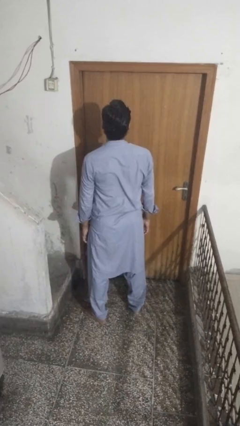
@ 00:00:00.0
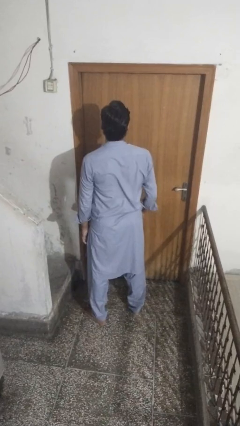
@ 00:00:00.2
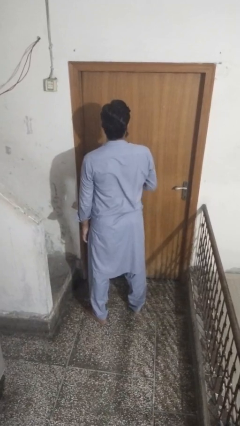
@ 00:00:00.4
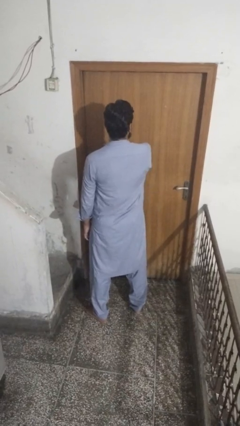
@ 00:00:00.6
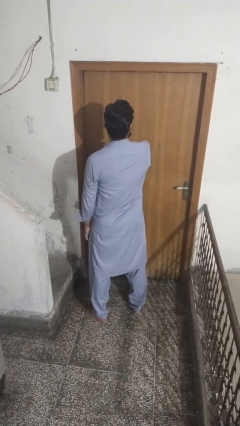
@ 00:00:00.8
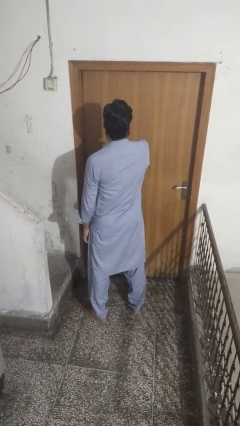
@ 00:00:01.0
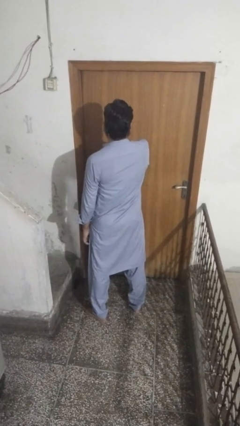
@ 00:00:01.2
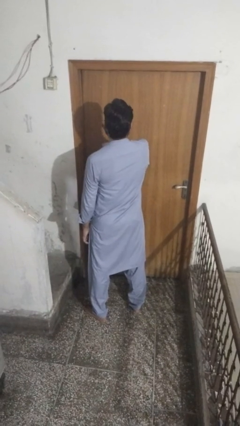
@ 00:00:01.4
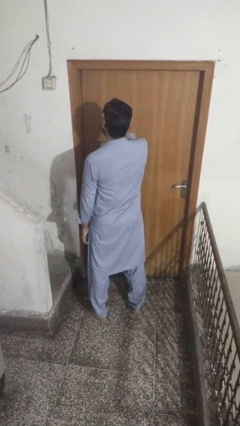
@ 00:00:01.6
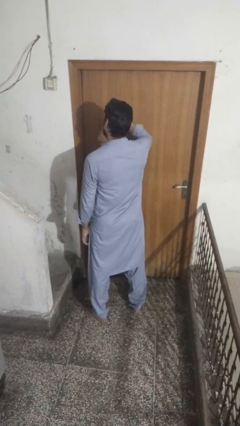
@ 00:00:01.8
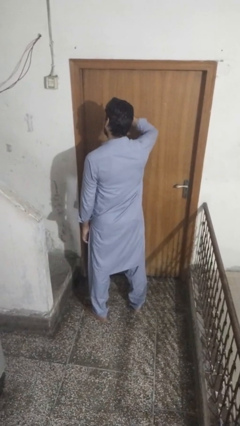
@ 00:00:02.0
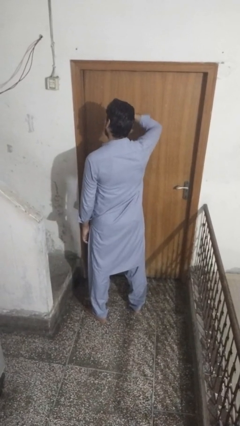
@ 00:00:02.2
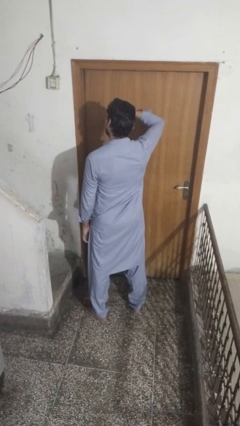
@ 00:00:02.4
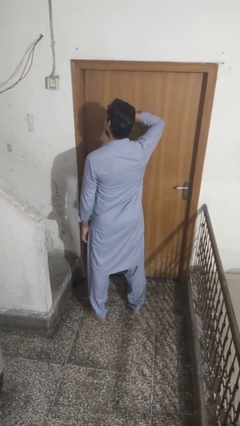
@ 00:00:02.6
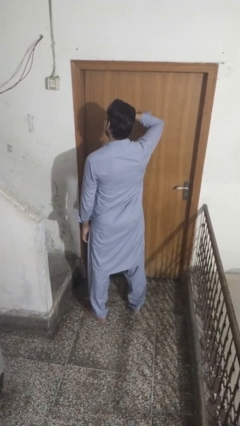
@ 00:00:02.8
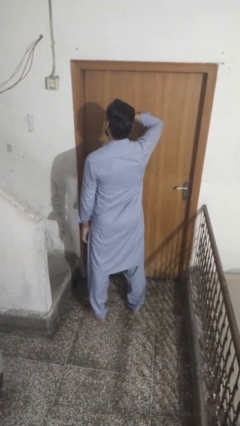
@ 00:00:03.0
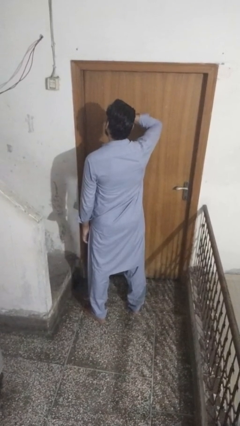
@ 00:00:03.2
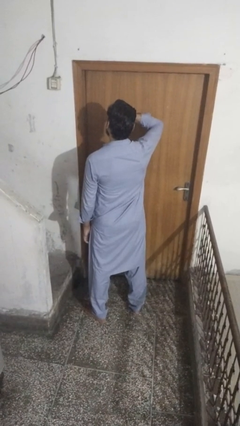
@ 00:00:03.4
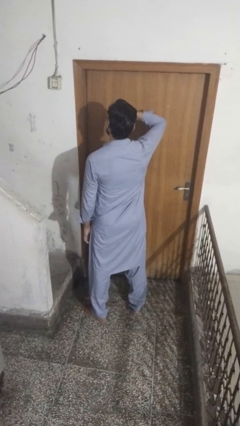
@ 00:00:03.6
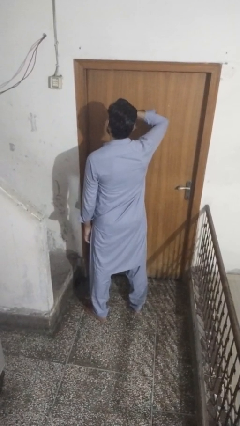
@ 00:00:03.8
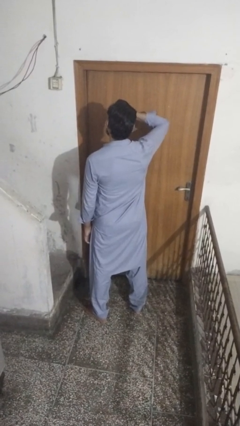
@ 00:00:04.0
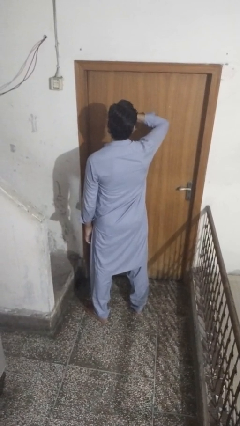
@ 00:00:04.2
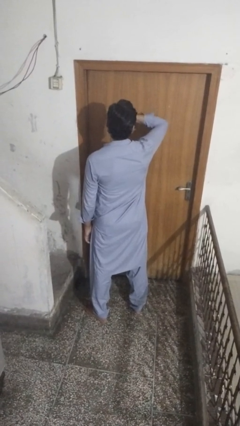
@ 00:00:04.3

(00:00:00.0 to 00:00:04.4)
person rubs eyes

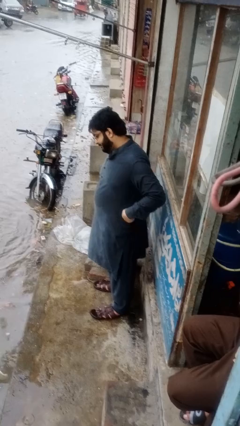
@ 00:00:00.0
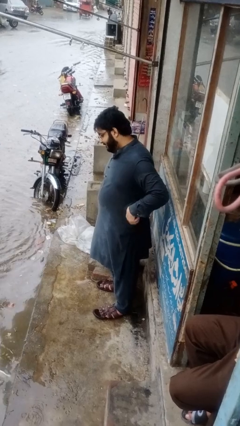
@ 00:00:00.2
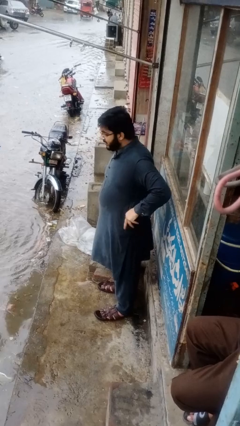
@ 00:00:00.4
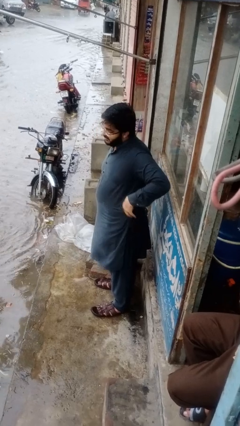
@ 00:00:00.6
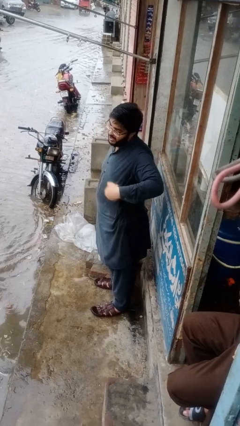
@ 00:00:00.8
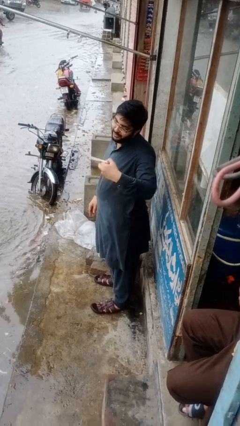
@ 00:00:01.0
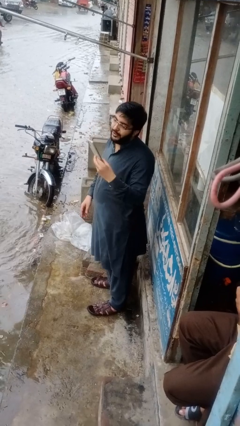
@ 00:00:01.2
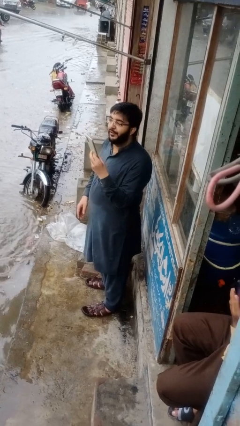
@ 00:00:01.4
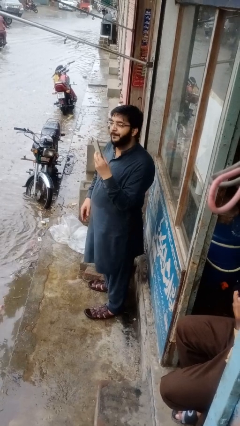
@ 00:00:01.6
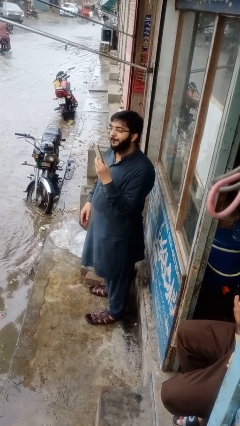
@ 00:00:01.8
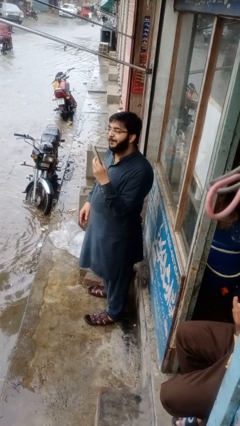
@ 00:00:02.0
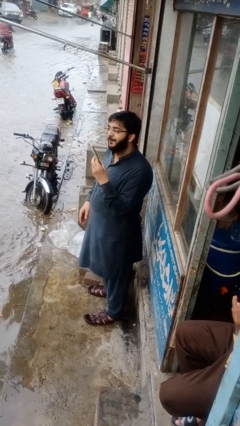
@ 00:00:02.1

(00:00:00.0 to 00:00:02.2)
person takes phone from pocket

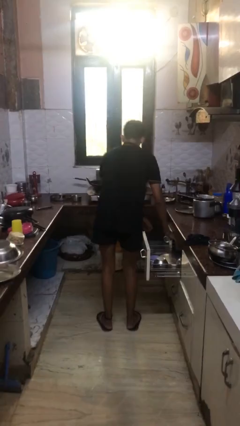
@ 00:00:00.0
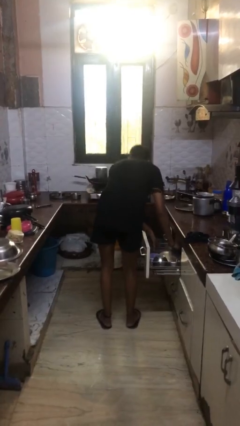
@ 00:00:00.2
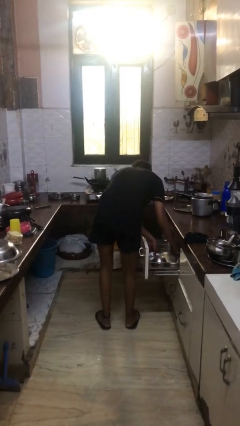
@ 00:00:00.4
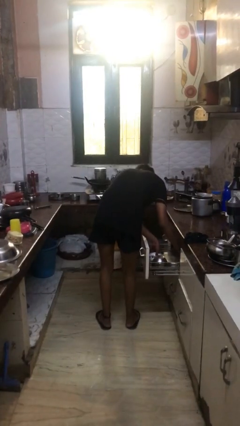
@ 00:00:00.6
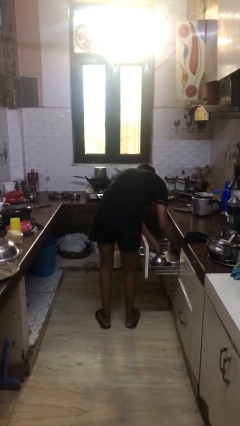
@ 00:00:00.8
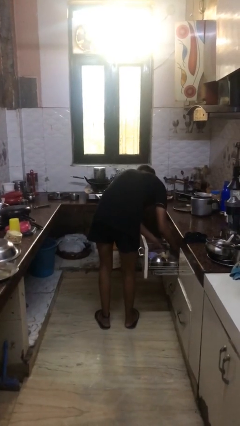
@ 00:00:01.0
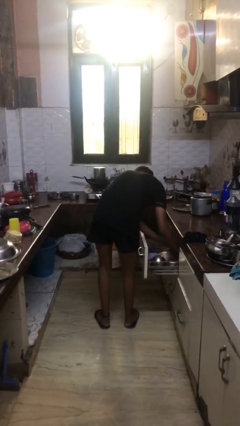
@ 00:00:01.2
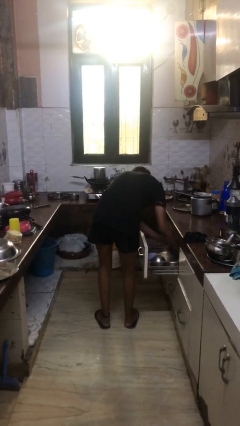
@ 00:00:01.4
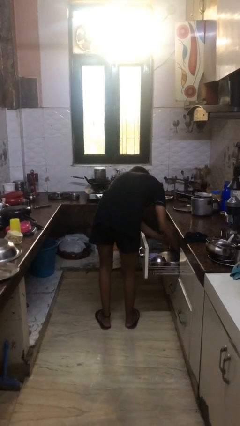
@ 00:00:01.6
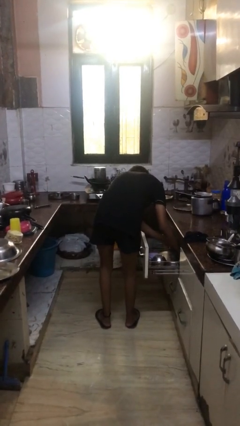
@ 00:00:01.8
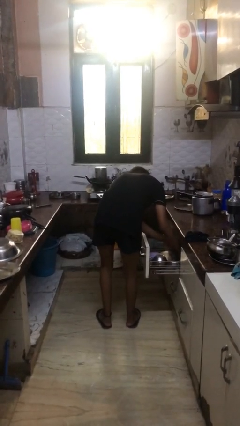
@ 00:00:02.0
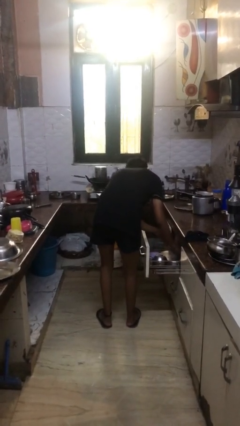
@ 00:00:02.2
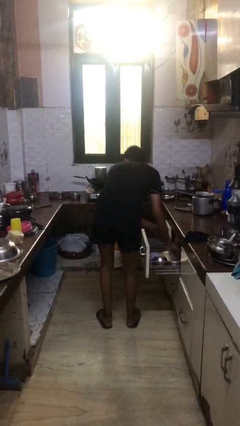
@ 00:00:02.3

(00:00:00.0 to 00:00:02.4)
person searches in kitchen drawer

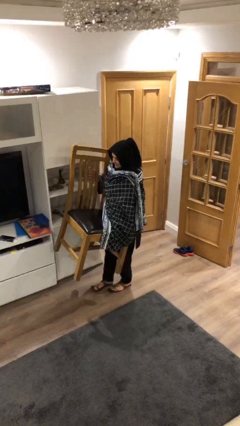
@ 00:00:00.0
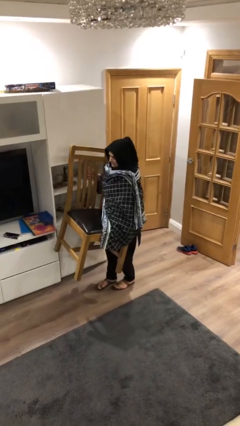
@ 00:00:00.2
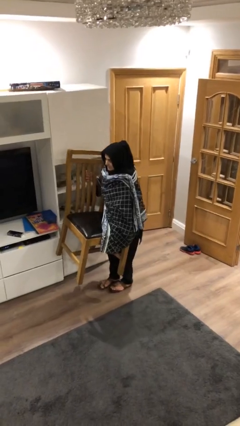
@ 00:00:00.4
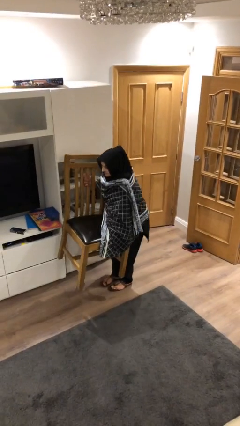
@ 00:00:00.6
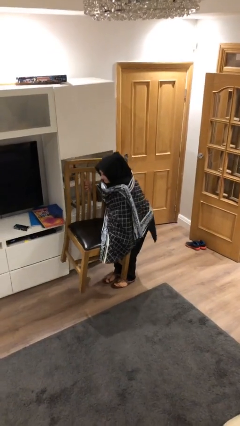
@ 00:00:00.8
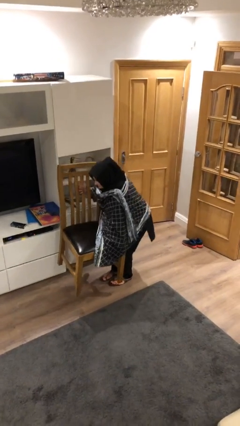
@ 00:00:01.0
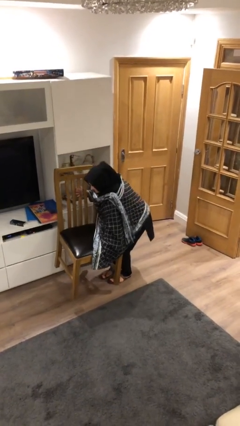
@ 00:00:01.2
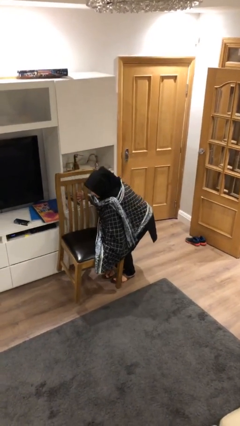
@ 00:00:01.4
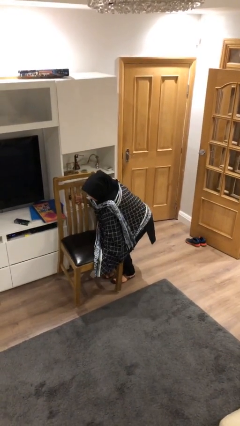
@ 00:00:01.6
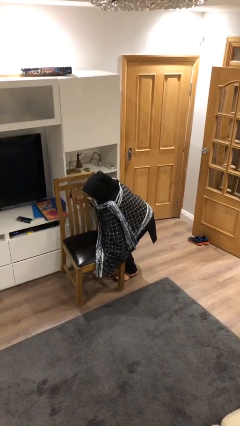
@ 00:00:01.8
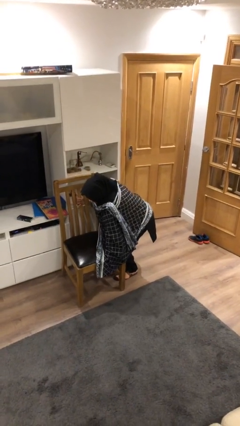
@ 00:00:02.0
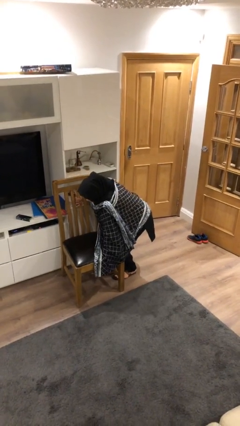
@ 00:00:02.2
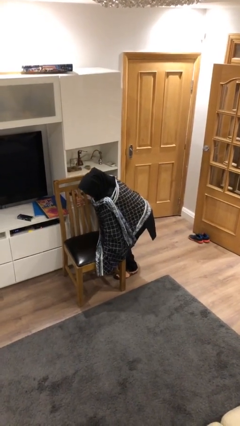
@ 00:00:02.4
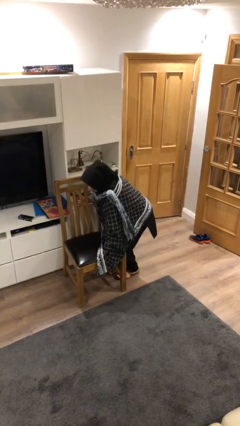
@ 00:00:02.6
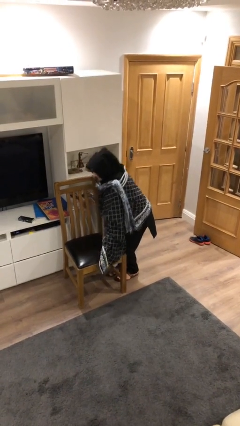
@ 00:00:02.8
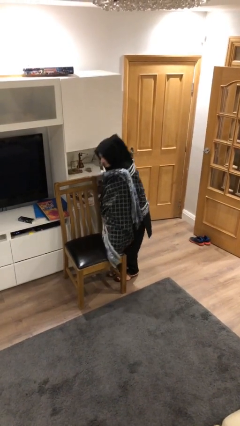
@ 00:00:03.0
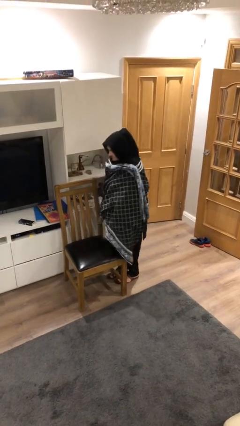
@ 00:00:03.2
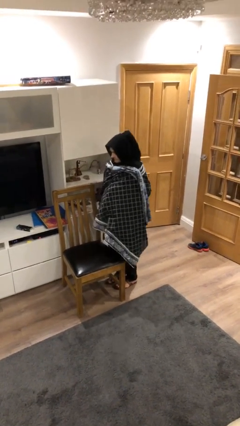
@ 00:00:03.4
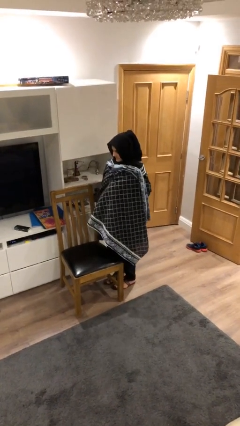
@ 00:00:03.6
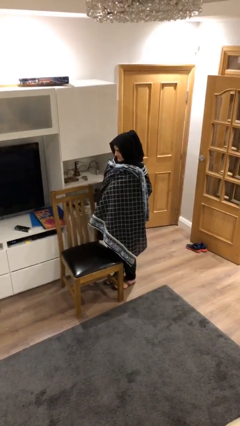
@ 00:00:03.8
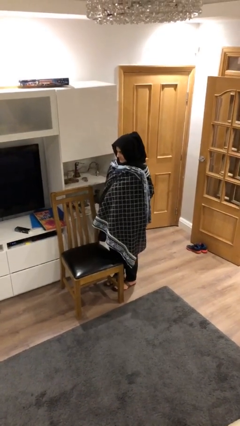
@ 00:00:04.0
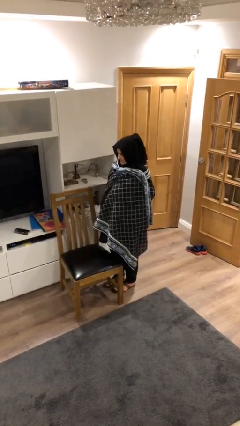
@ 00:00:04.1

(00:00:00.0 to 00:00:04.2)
person puts down object on floor

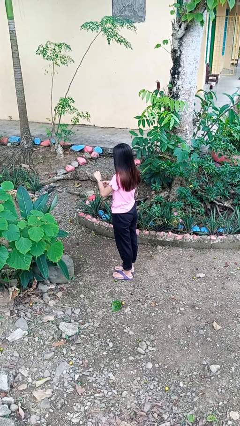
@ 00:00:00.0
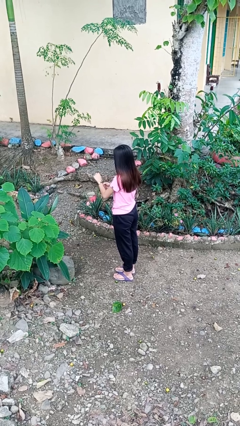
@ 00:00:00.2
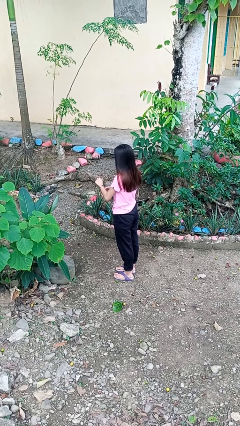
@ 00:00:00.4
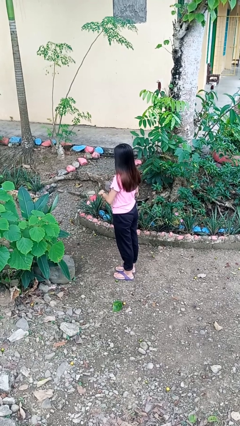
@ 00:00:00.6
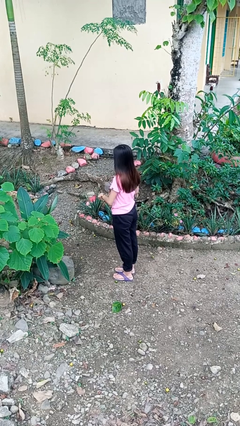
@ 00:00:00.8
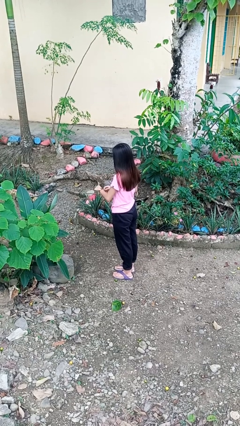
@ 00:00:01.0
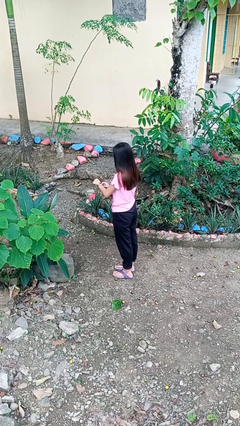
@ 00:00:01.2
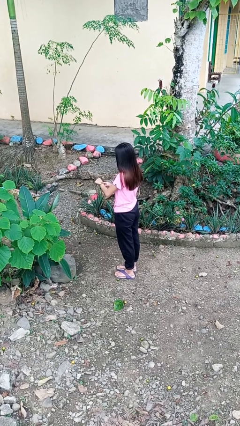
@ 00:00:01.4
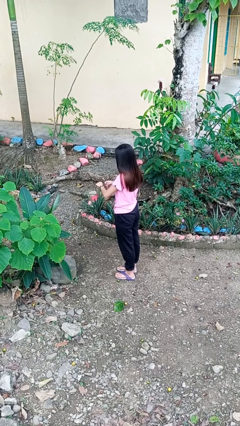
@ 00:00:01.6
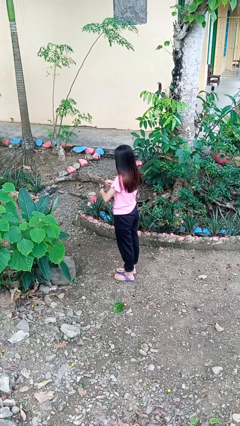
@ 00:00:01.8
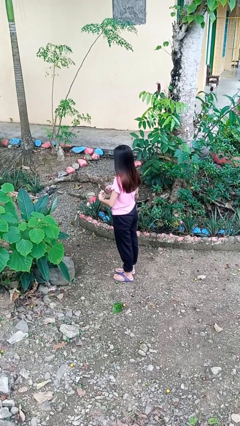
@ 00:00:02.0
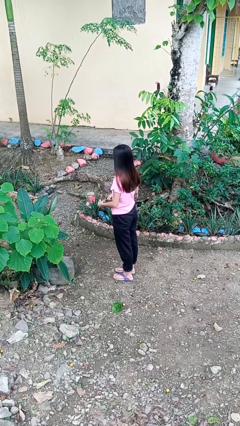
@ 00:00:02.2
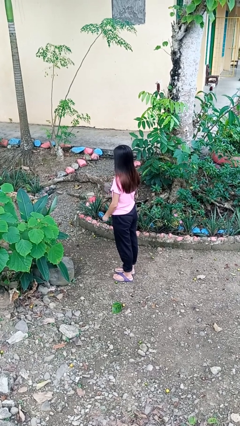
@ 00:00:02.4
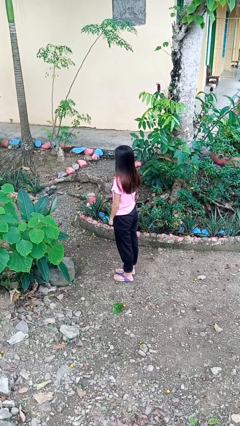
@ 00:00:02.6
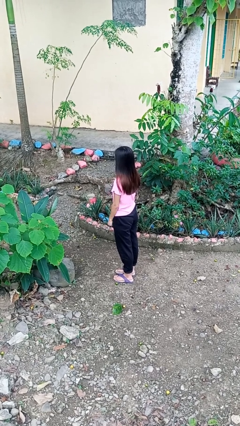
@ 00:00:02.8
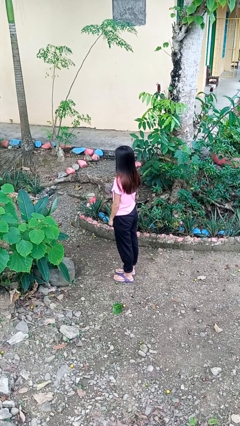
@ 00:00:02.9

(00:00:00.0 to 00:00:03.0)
person takes off wristwatch

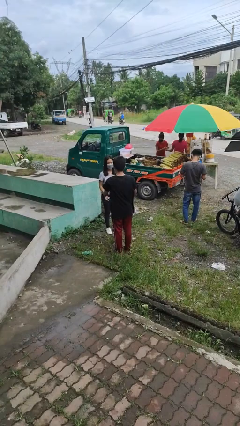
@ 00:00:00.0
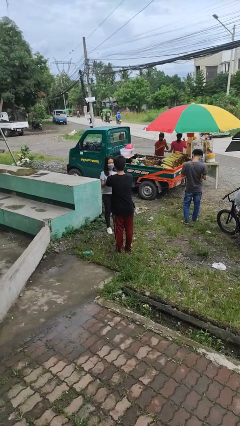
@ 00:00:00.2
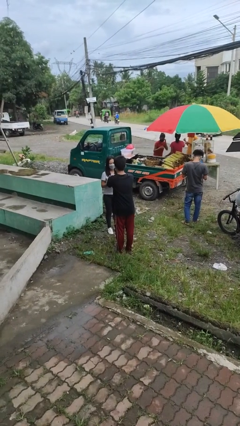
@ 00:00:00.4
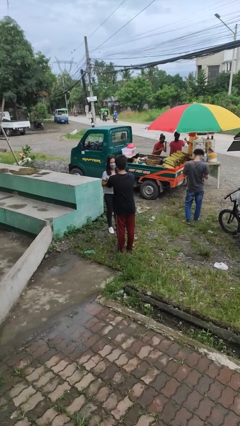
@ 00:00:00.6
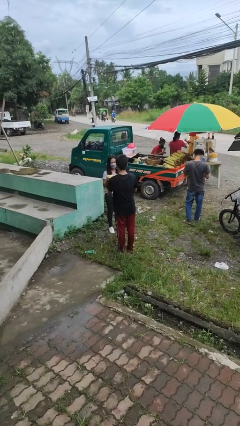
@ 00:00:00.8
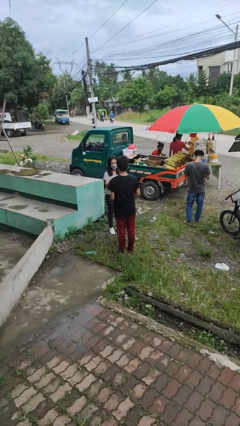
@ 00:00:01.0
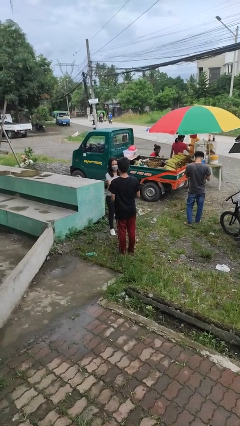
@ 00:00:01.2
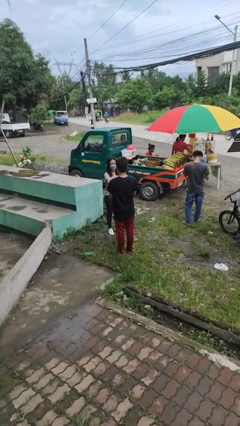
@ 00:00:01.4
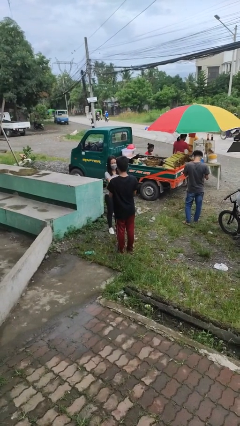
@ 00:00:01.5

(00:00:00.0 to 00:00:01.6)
person transfers object to person
